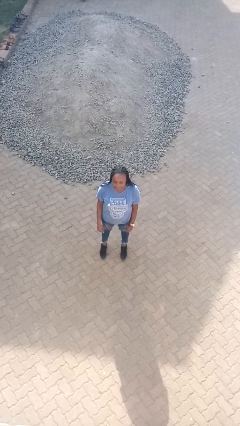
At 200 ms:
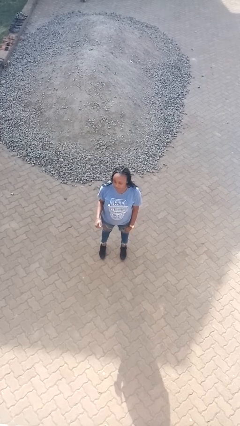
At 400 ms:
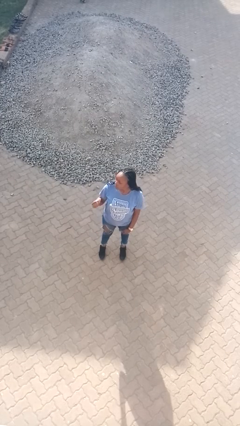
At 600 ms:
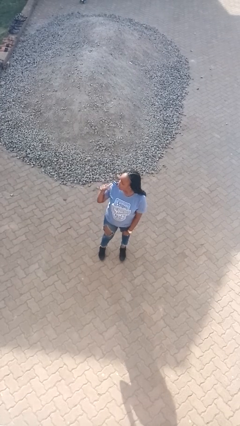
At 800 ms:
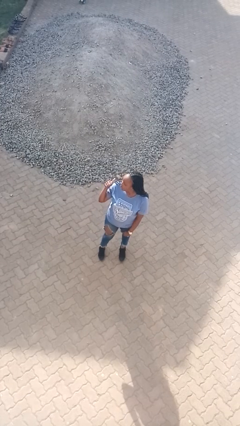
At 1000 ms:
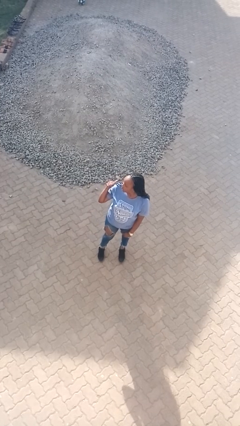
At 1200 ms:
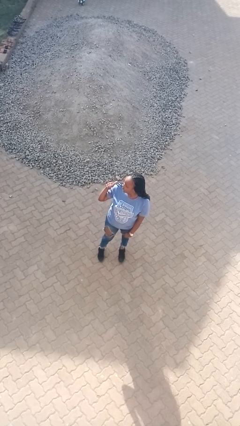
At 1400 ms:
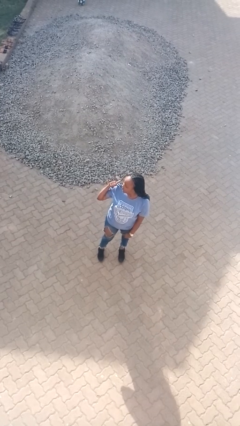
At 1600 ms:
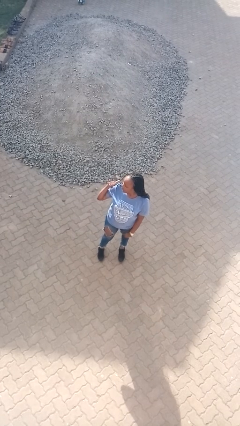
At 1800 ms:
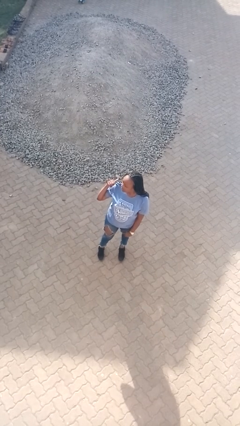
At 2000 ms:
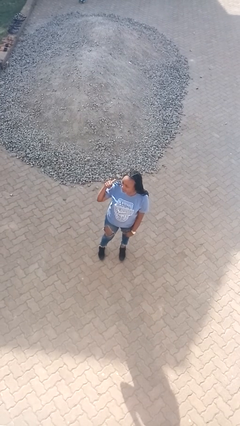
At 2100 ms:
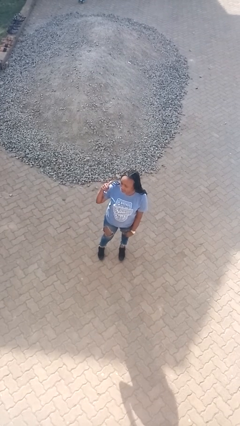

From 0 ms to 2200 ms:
person gestures behind me

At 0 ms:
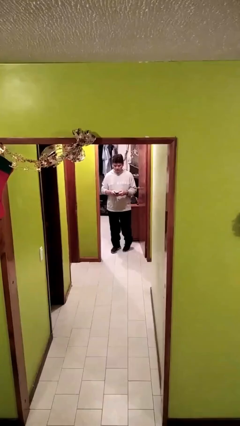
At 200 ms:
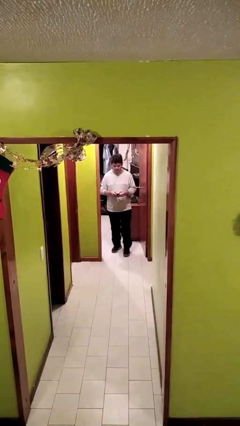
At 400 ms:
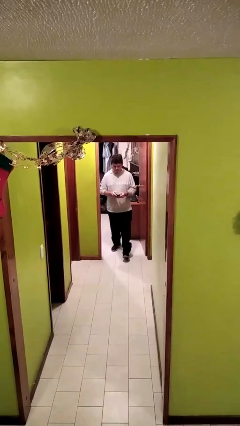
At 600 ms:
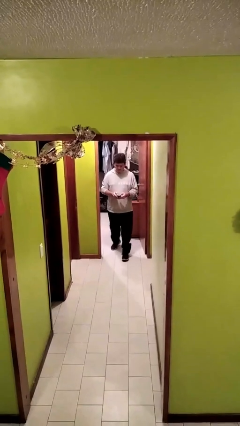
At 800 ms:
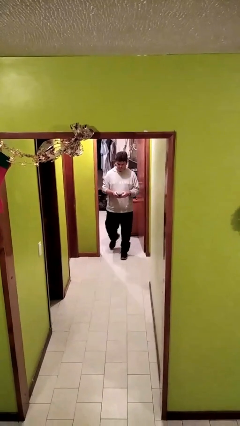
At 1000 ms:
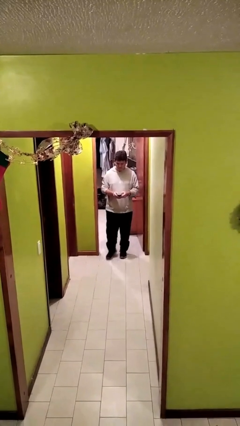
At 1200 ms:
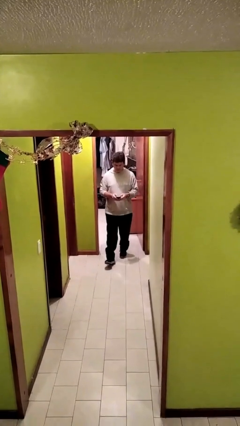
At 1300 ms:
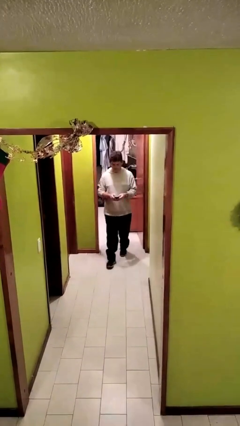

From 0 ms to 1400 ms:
person enters scene through structure

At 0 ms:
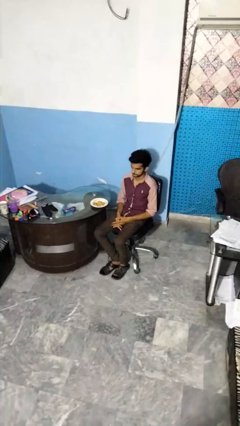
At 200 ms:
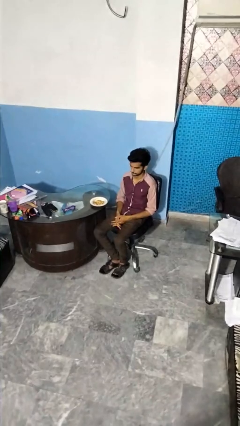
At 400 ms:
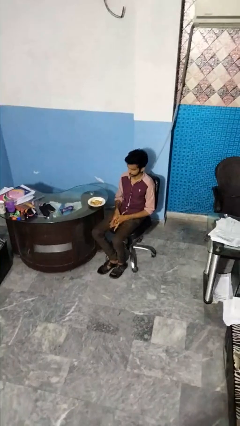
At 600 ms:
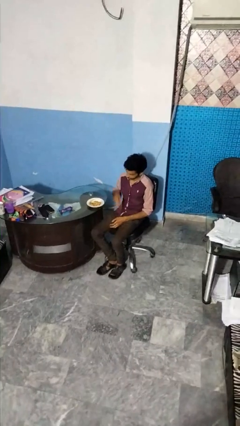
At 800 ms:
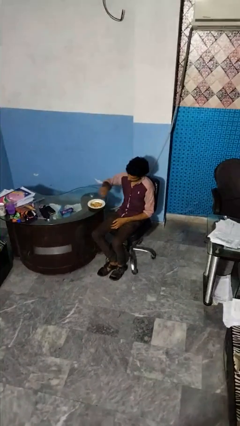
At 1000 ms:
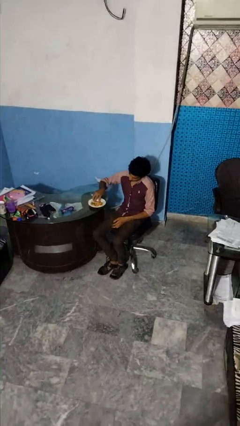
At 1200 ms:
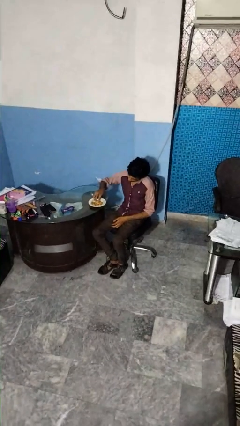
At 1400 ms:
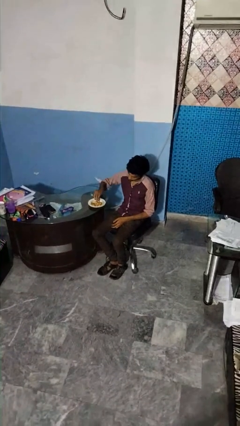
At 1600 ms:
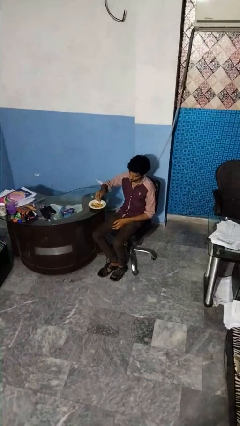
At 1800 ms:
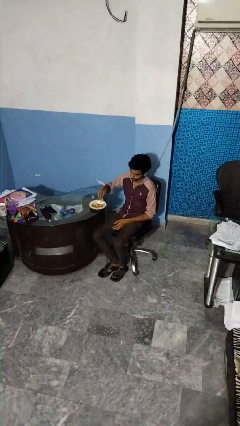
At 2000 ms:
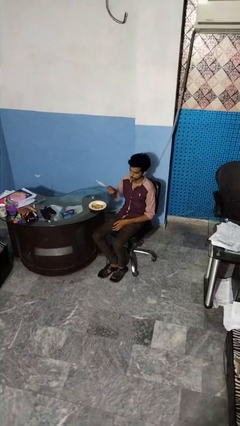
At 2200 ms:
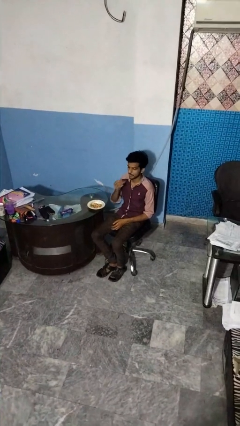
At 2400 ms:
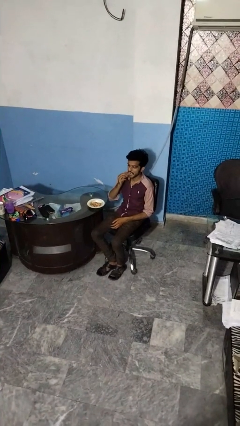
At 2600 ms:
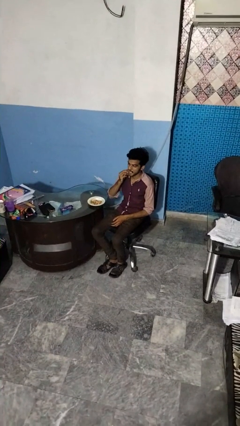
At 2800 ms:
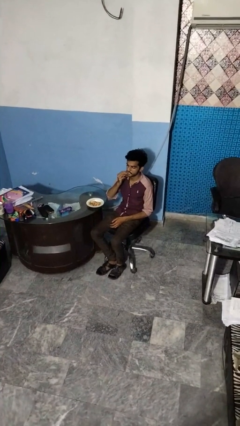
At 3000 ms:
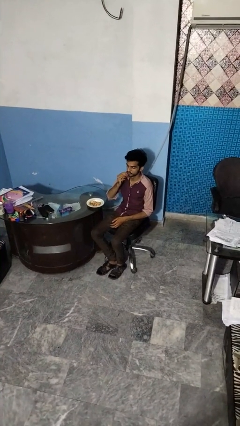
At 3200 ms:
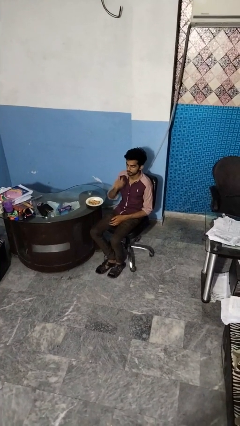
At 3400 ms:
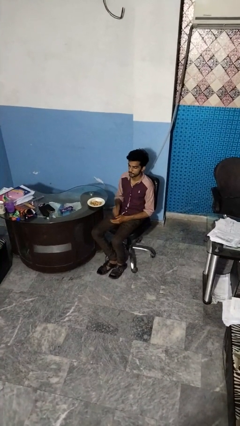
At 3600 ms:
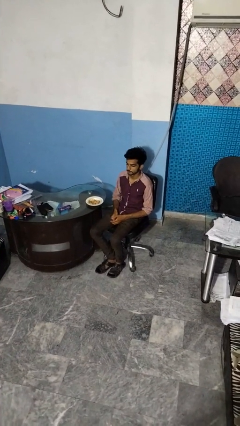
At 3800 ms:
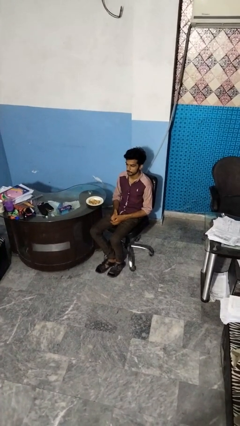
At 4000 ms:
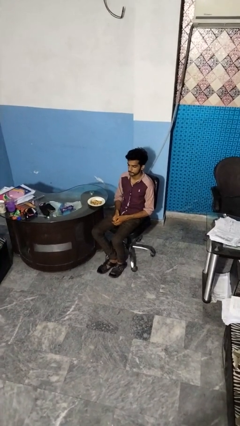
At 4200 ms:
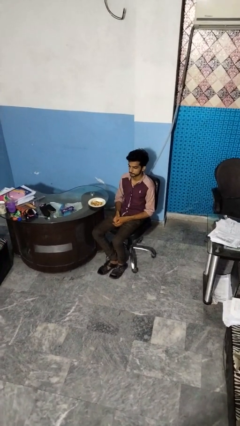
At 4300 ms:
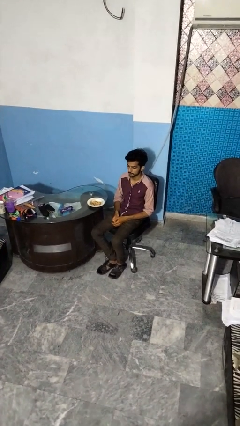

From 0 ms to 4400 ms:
person eats with hands

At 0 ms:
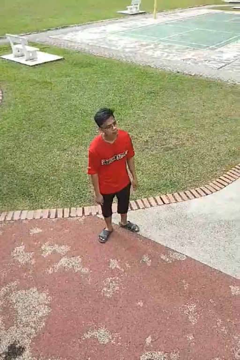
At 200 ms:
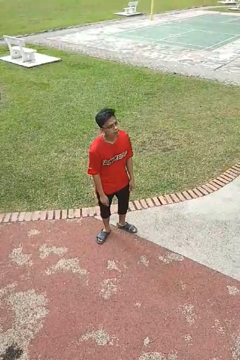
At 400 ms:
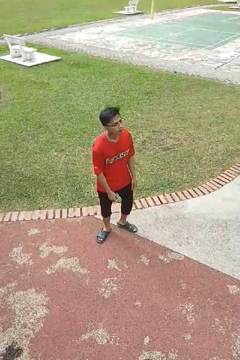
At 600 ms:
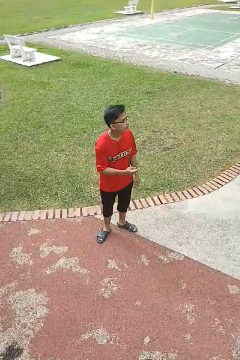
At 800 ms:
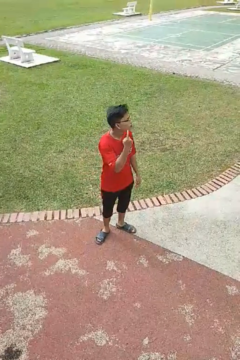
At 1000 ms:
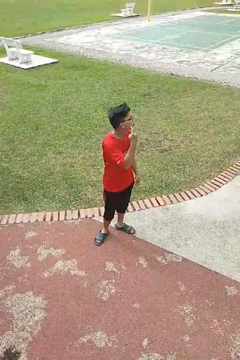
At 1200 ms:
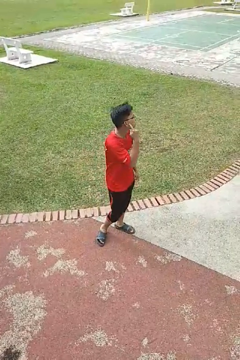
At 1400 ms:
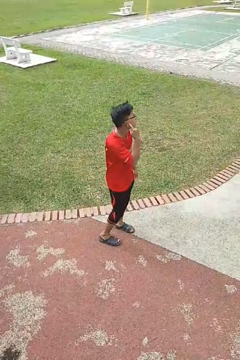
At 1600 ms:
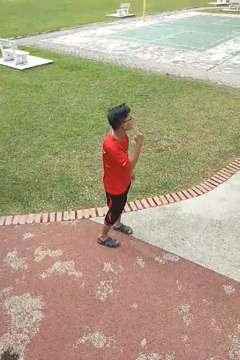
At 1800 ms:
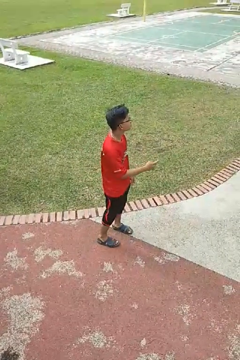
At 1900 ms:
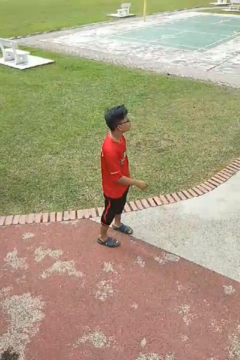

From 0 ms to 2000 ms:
person gestures listen closely

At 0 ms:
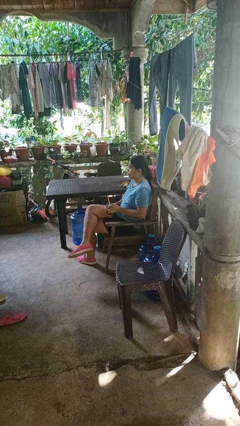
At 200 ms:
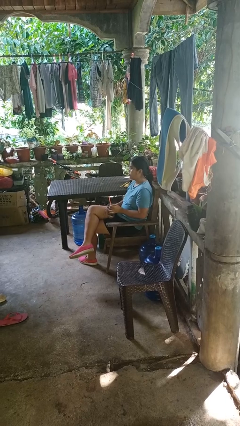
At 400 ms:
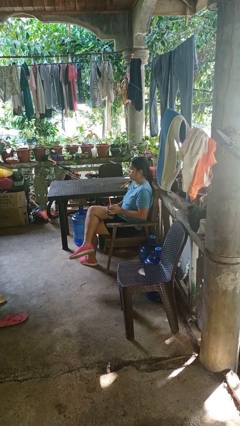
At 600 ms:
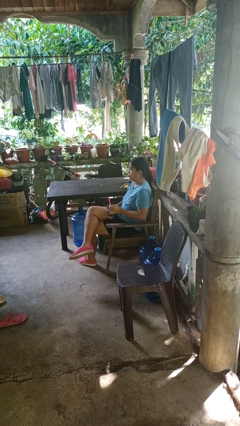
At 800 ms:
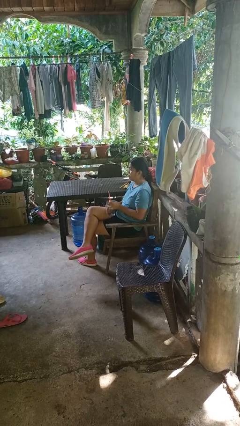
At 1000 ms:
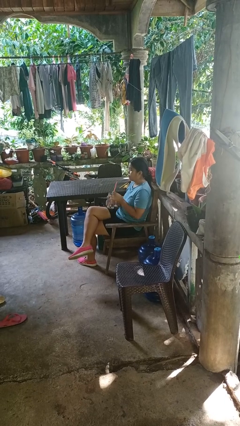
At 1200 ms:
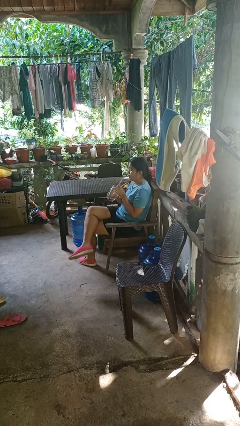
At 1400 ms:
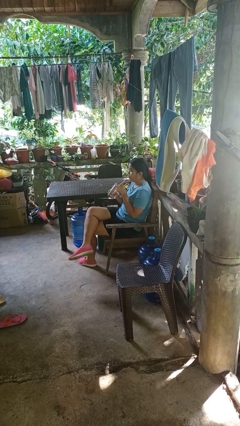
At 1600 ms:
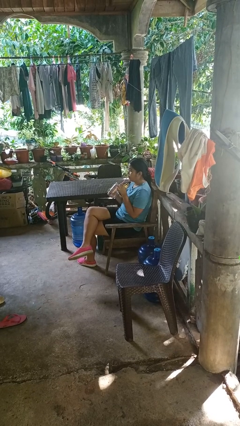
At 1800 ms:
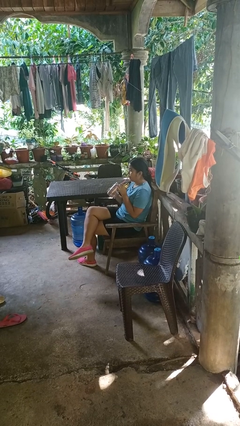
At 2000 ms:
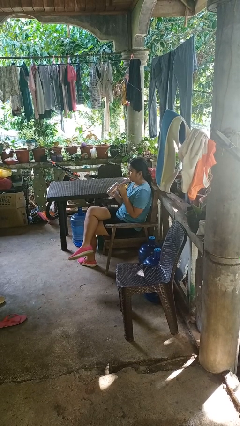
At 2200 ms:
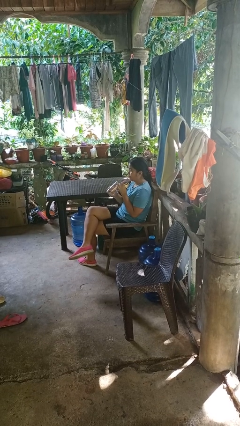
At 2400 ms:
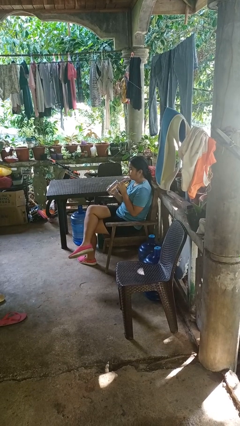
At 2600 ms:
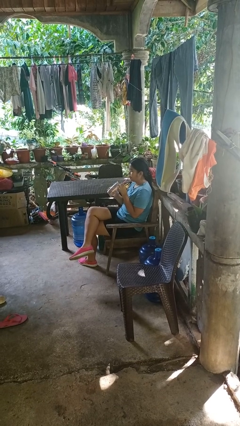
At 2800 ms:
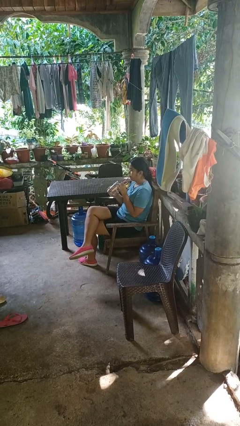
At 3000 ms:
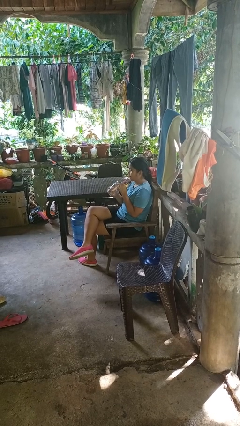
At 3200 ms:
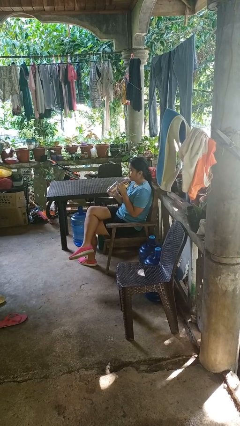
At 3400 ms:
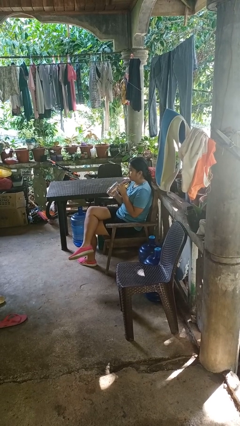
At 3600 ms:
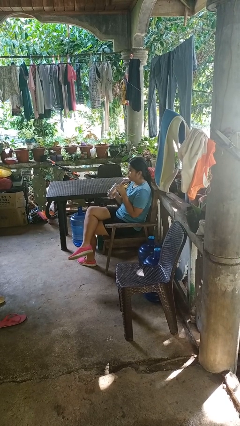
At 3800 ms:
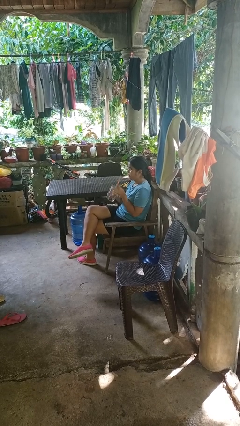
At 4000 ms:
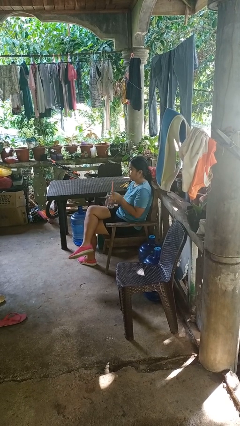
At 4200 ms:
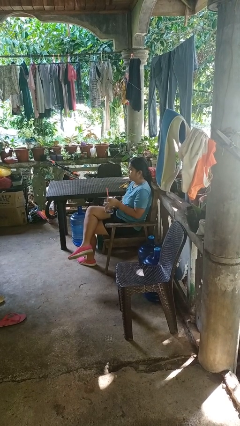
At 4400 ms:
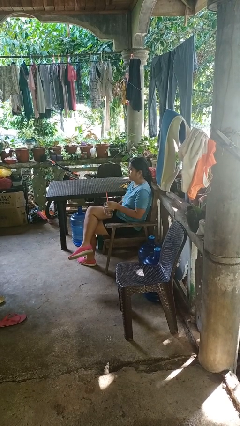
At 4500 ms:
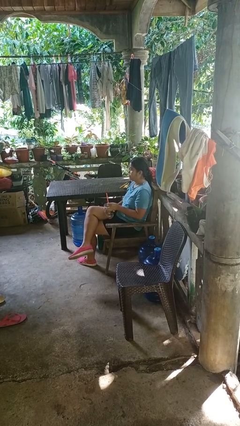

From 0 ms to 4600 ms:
person drinks from straw

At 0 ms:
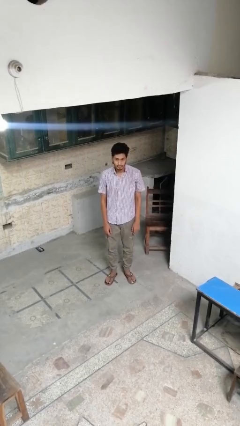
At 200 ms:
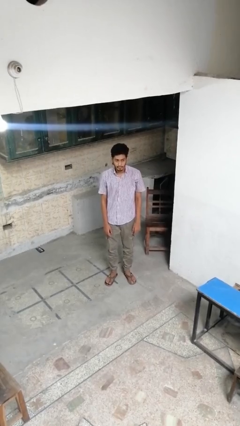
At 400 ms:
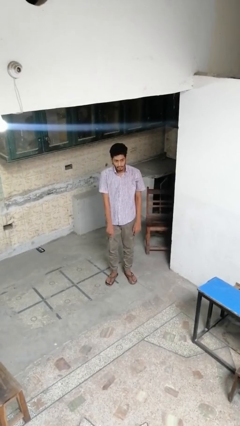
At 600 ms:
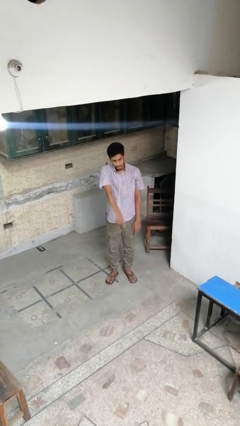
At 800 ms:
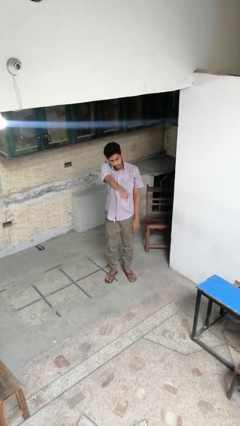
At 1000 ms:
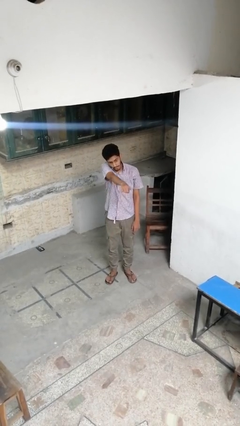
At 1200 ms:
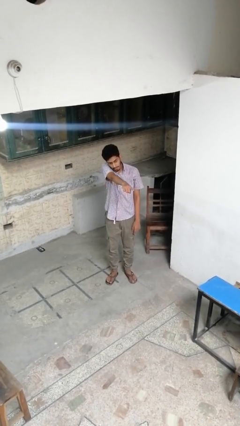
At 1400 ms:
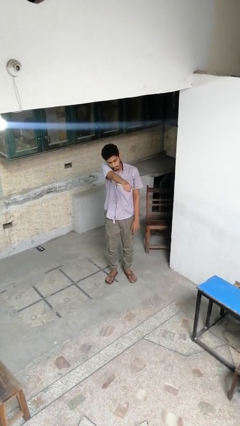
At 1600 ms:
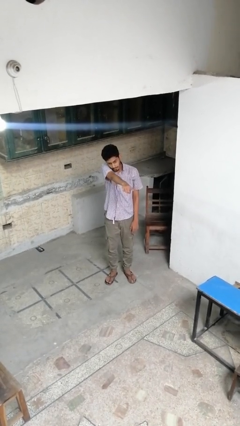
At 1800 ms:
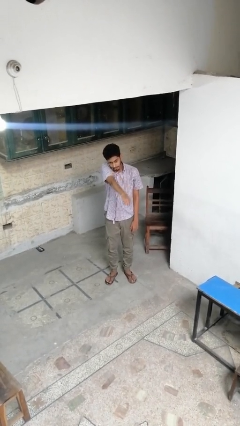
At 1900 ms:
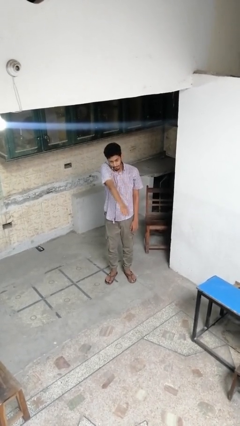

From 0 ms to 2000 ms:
person points at person

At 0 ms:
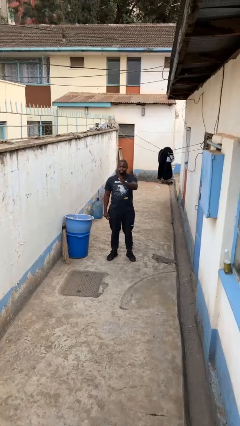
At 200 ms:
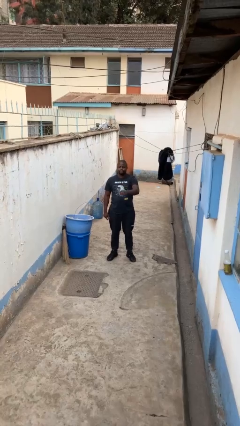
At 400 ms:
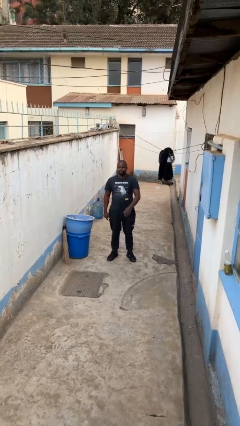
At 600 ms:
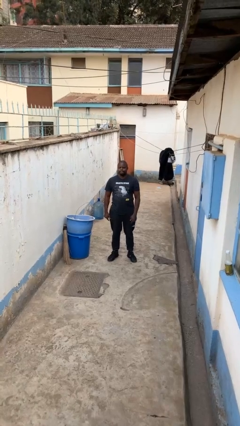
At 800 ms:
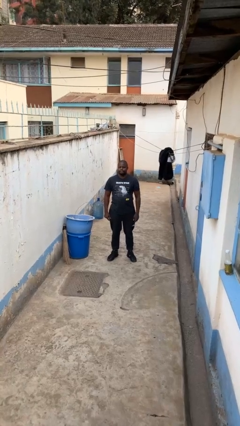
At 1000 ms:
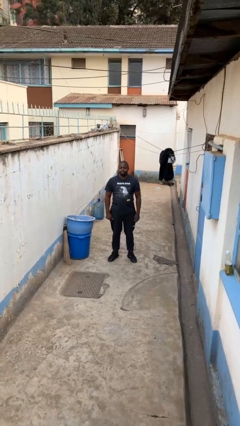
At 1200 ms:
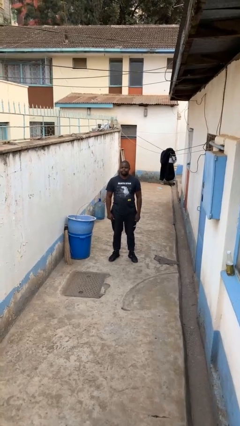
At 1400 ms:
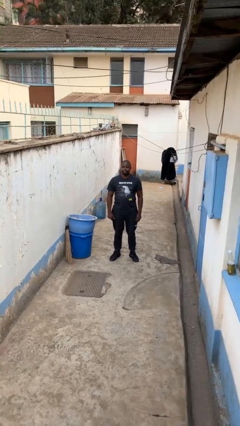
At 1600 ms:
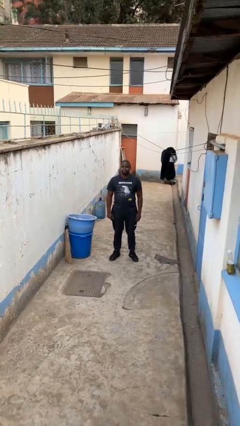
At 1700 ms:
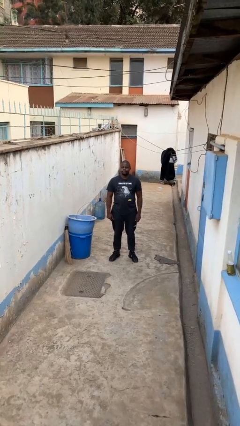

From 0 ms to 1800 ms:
person gestures swipe right
